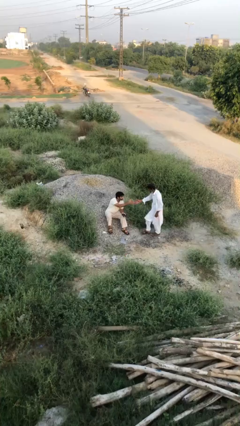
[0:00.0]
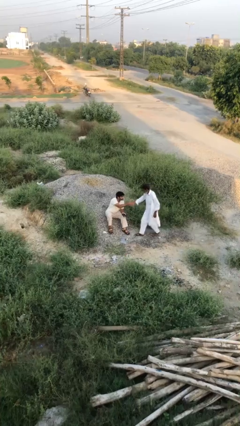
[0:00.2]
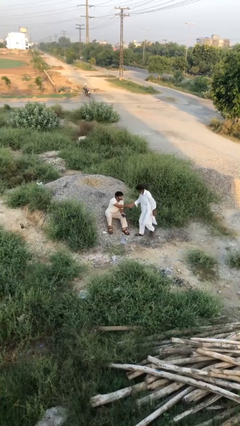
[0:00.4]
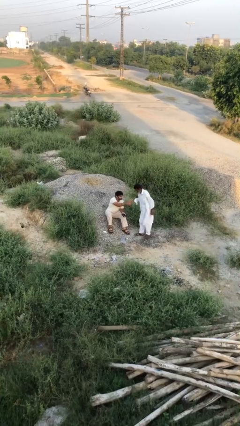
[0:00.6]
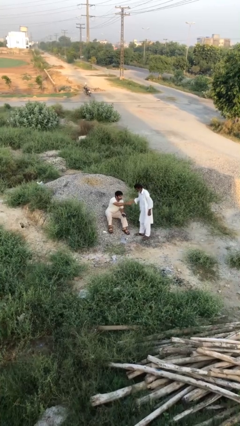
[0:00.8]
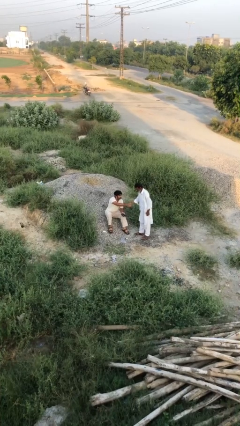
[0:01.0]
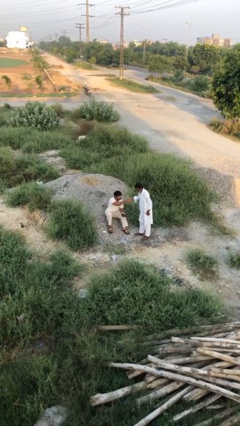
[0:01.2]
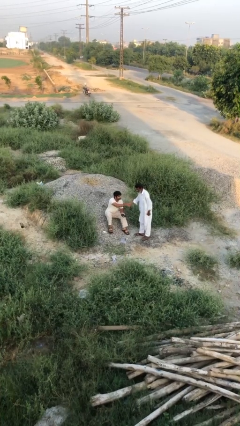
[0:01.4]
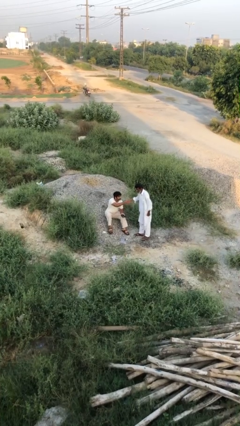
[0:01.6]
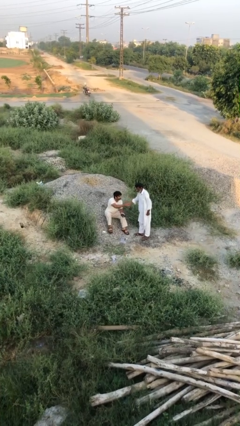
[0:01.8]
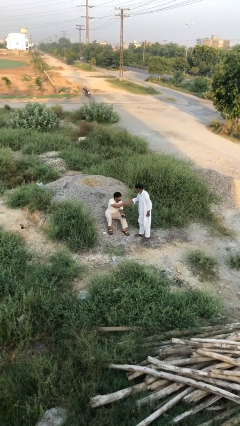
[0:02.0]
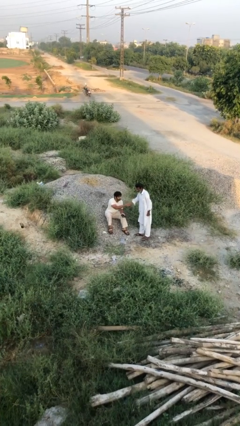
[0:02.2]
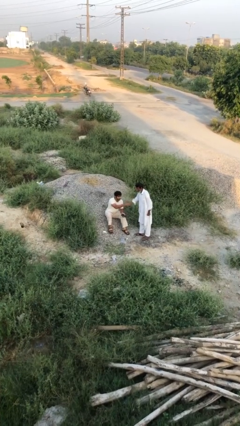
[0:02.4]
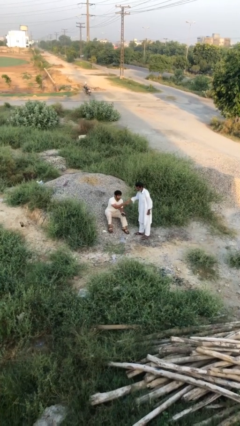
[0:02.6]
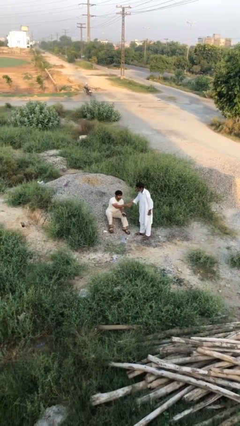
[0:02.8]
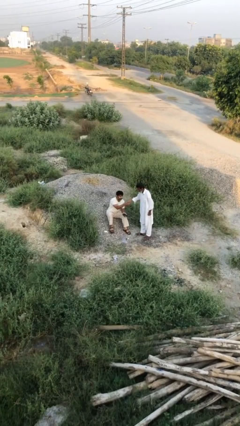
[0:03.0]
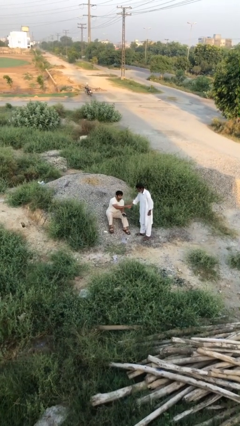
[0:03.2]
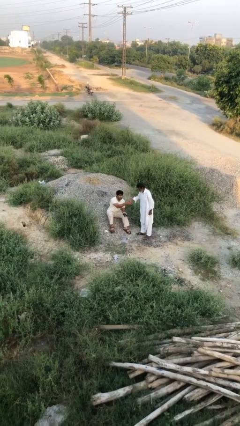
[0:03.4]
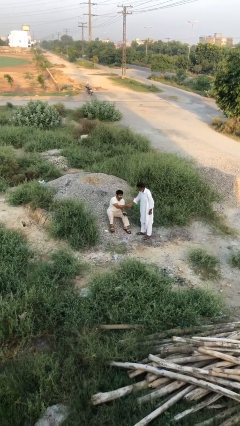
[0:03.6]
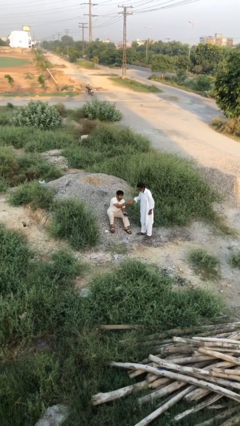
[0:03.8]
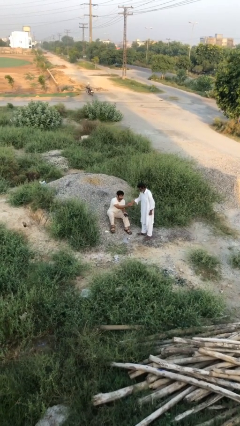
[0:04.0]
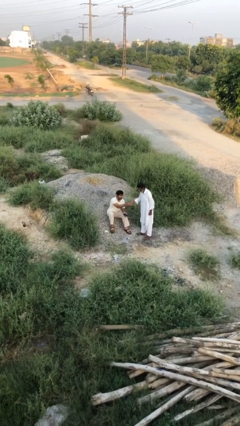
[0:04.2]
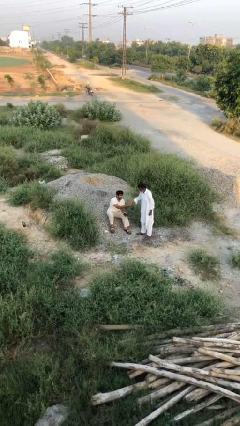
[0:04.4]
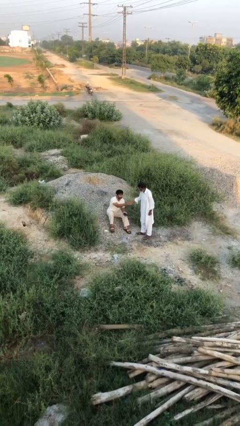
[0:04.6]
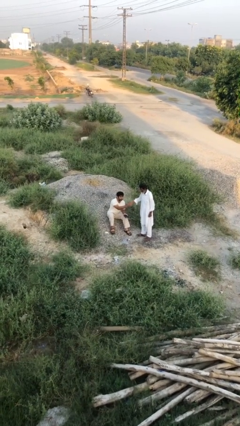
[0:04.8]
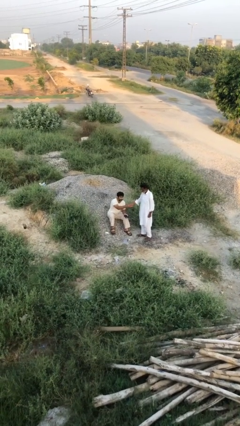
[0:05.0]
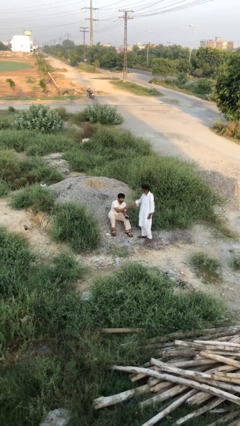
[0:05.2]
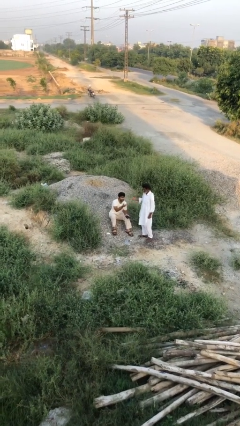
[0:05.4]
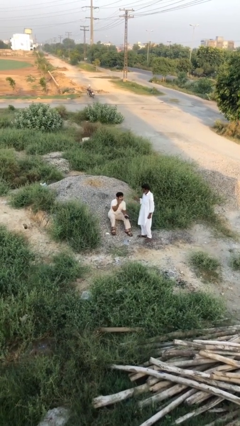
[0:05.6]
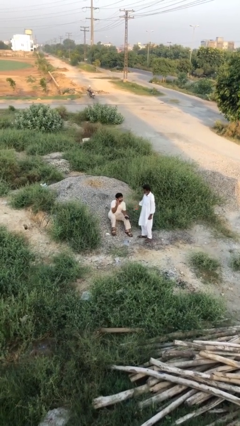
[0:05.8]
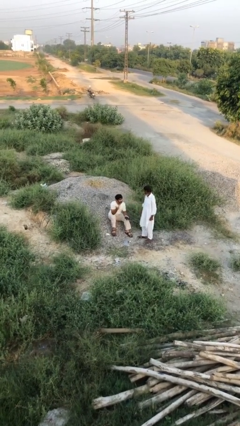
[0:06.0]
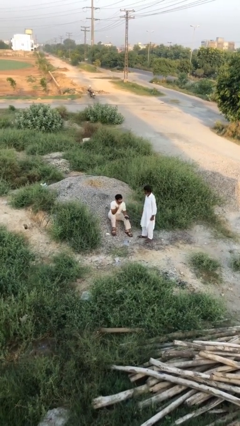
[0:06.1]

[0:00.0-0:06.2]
person shakes hand

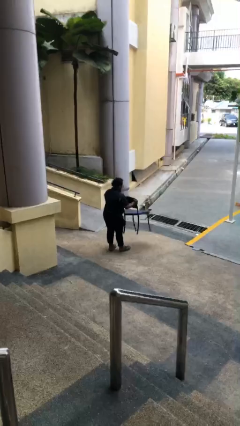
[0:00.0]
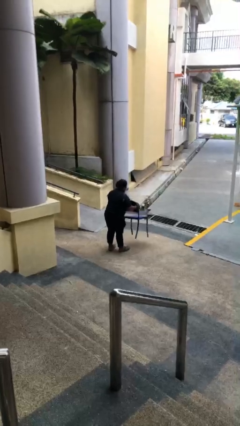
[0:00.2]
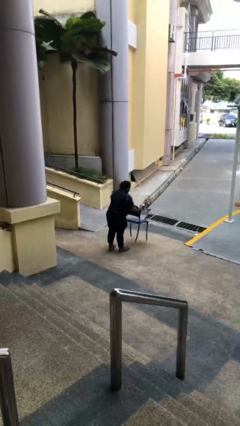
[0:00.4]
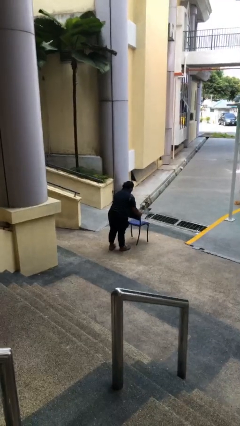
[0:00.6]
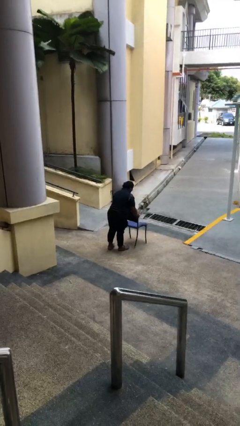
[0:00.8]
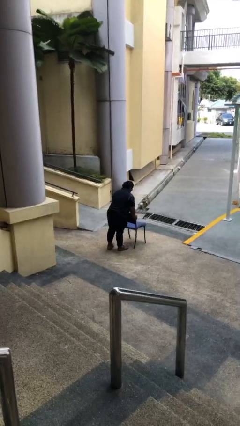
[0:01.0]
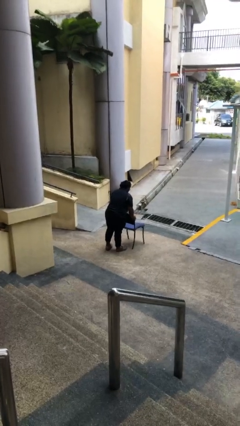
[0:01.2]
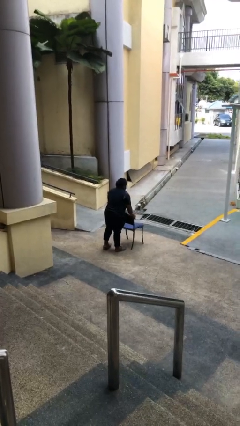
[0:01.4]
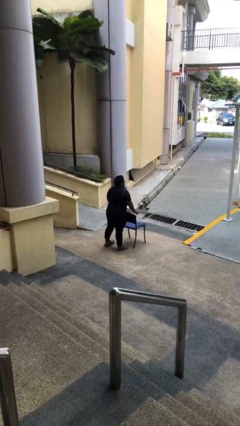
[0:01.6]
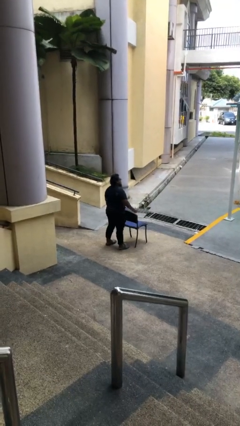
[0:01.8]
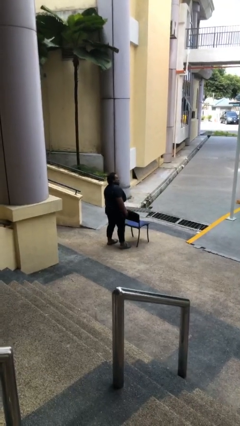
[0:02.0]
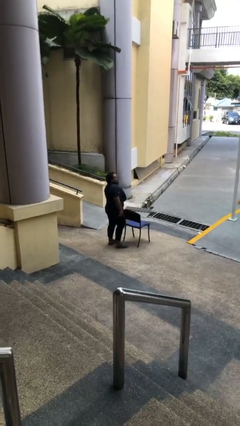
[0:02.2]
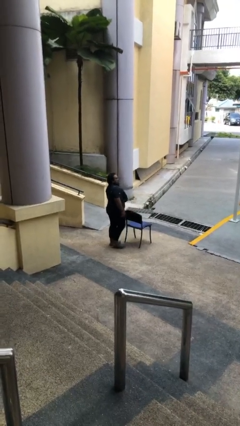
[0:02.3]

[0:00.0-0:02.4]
person puts down object on floor

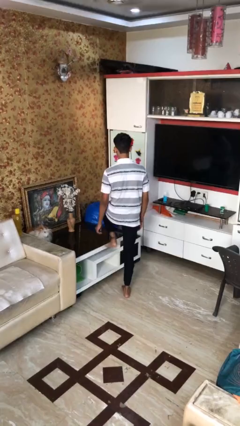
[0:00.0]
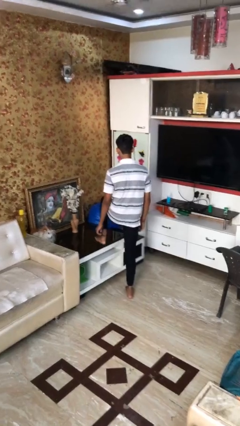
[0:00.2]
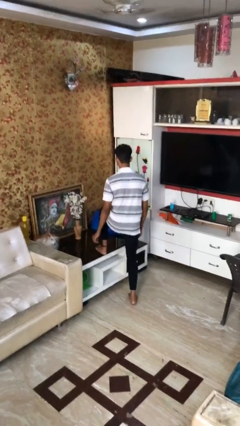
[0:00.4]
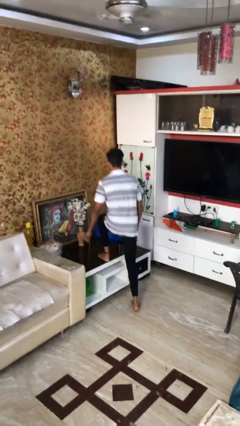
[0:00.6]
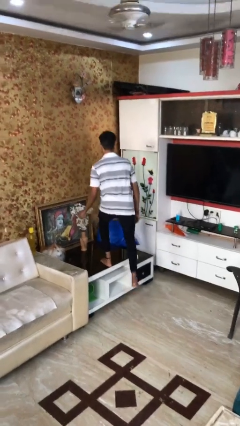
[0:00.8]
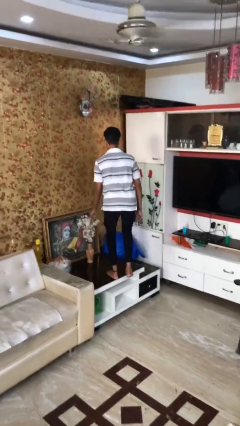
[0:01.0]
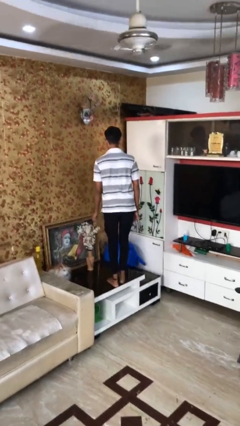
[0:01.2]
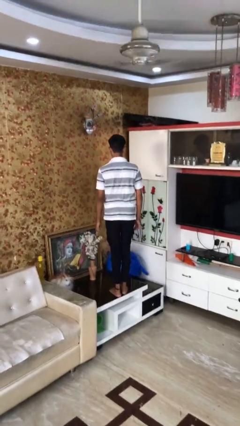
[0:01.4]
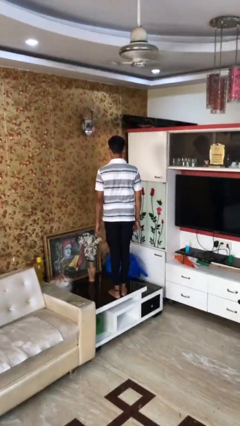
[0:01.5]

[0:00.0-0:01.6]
person climbs on table

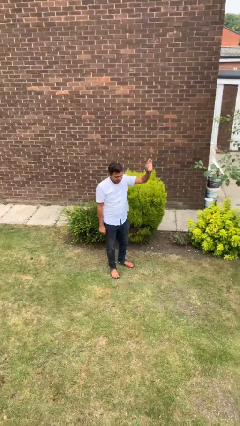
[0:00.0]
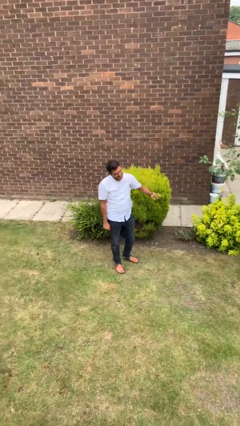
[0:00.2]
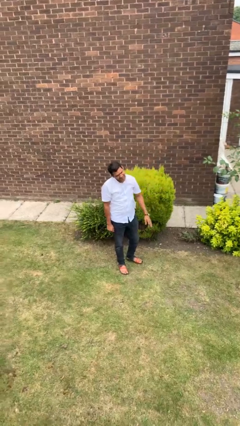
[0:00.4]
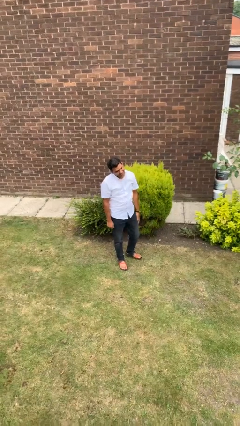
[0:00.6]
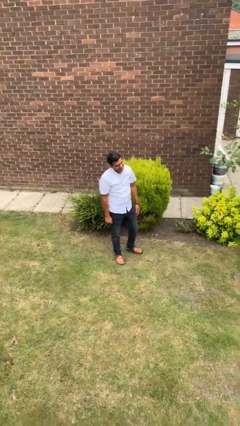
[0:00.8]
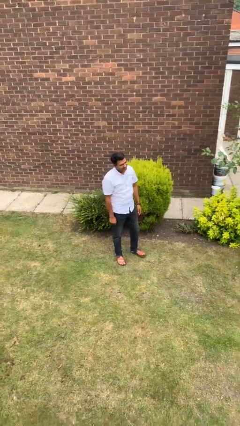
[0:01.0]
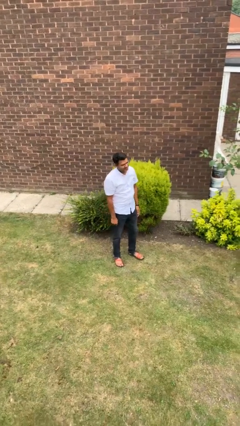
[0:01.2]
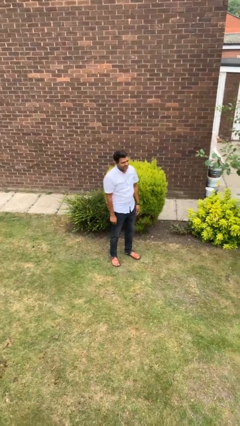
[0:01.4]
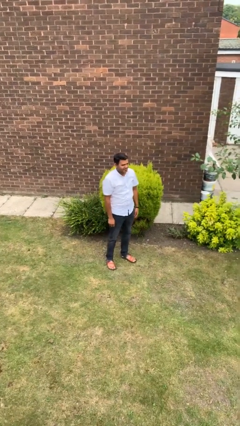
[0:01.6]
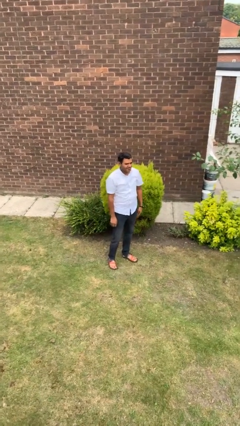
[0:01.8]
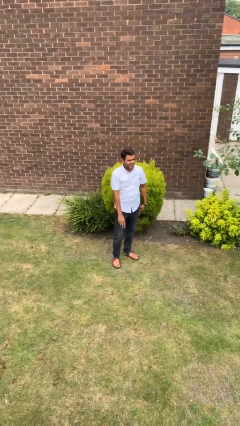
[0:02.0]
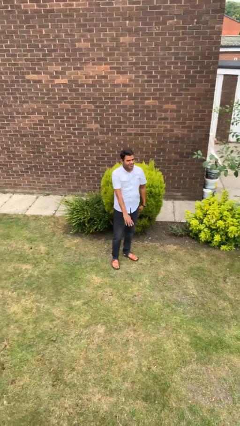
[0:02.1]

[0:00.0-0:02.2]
person gestures lower hand

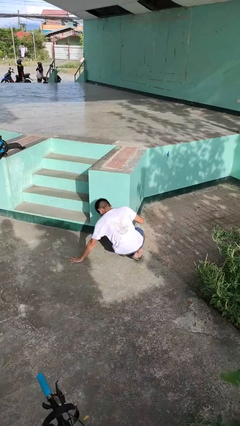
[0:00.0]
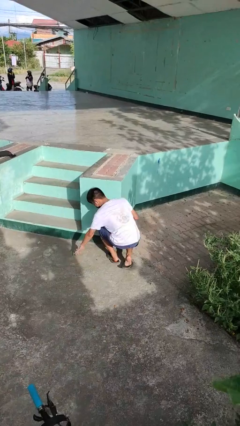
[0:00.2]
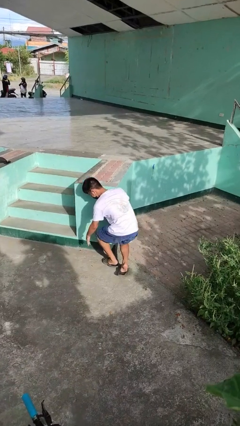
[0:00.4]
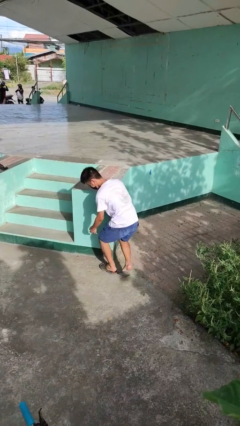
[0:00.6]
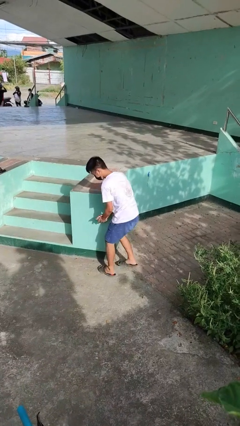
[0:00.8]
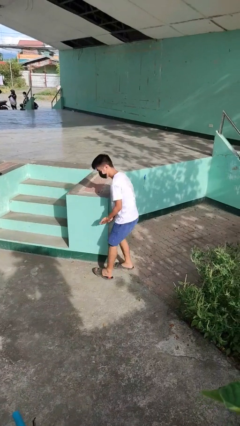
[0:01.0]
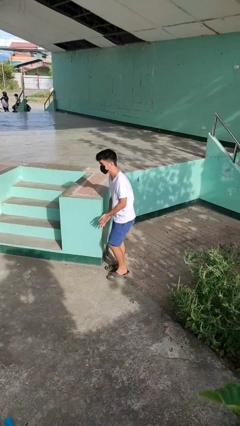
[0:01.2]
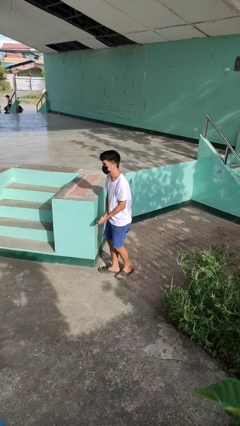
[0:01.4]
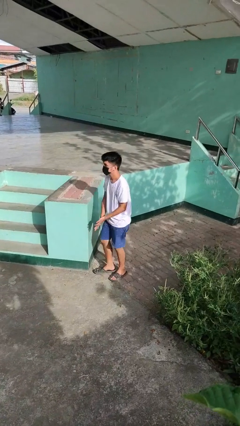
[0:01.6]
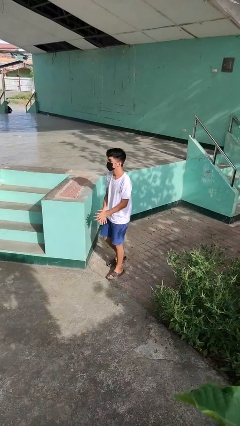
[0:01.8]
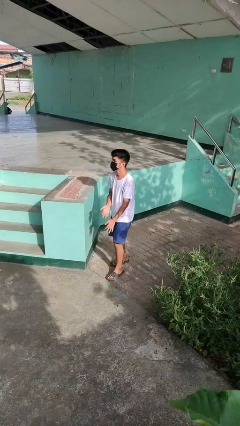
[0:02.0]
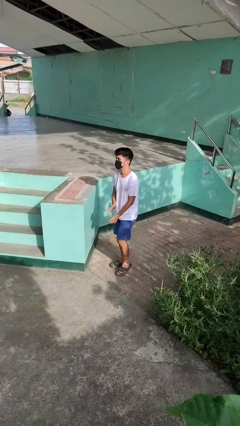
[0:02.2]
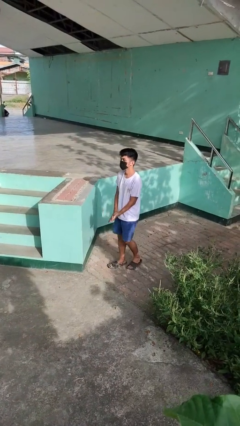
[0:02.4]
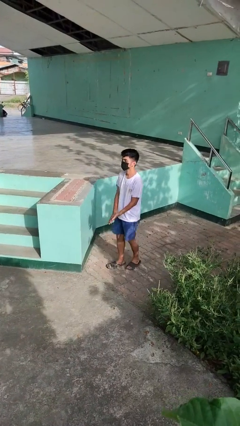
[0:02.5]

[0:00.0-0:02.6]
person stands up from floor

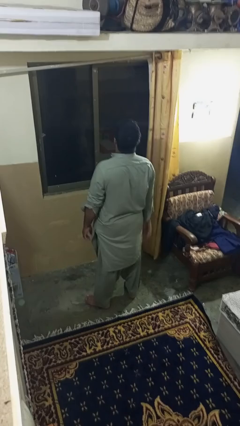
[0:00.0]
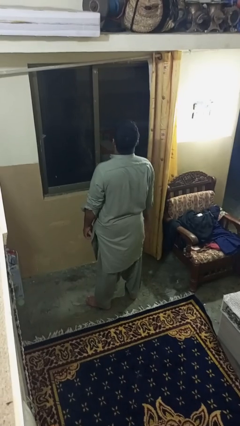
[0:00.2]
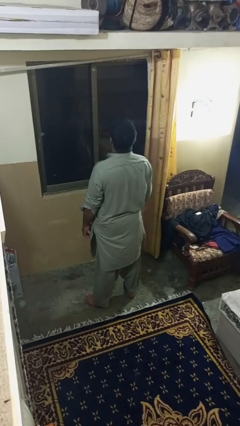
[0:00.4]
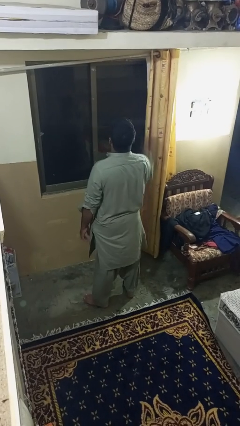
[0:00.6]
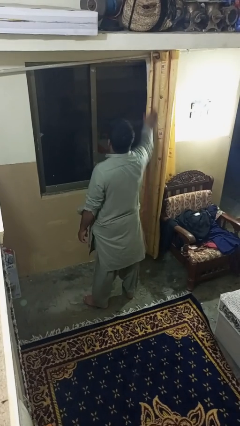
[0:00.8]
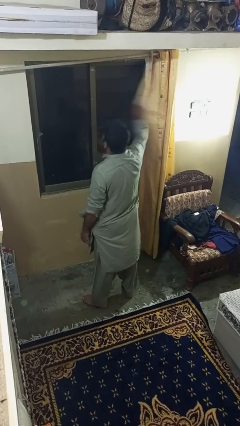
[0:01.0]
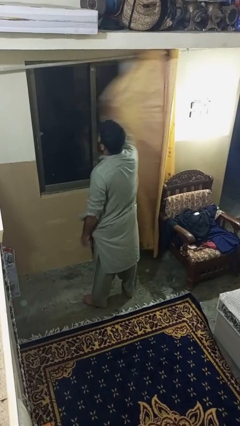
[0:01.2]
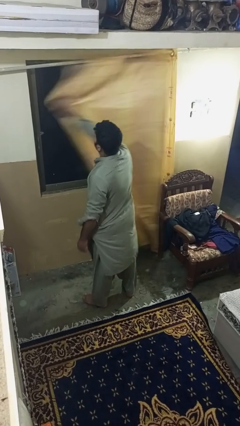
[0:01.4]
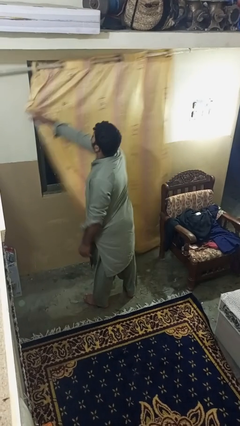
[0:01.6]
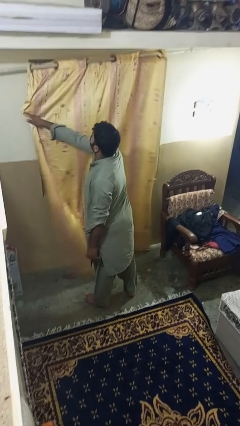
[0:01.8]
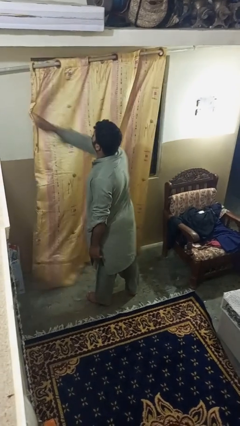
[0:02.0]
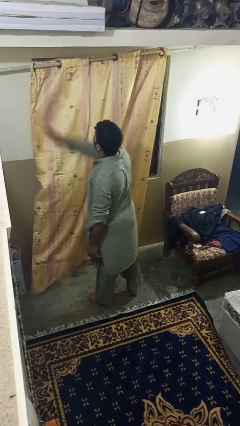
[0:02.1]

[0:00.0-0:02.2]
person closes curtains
